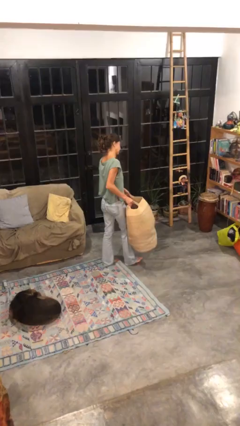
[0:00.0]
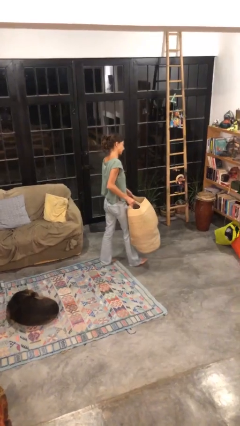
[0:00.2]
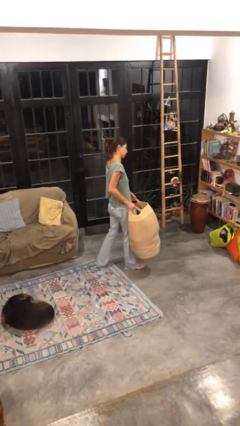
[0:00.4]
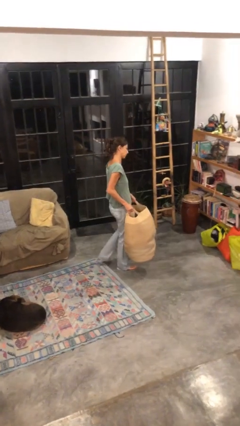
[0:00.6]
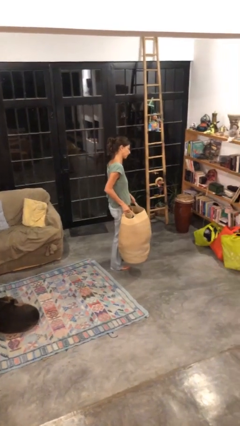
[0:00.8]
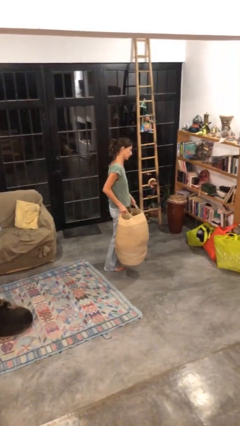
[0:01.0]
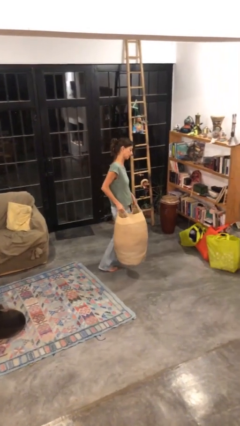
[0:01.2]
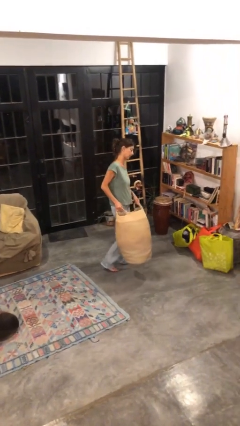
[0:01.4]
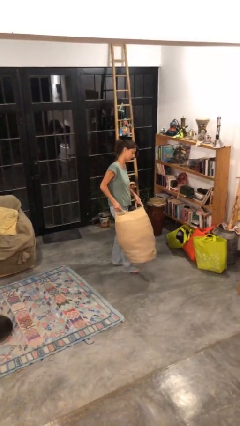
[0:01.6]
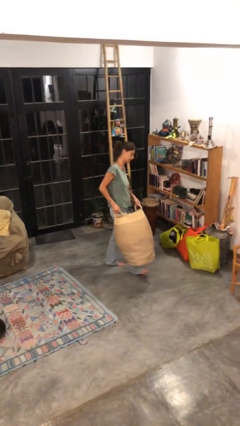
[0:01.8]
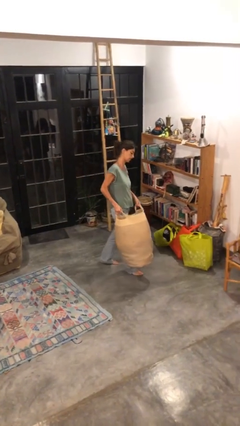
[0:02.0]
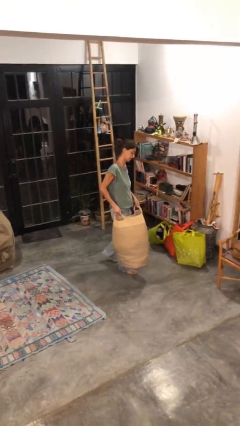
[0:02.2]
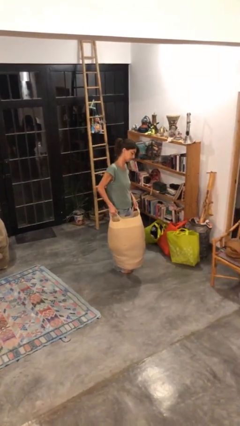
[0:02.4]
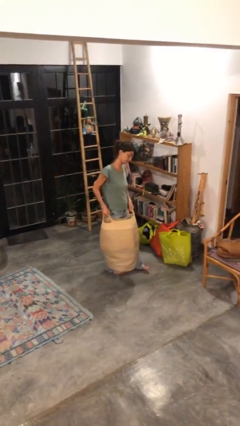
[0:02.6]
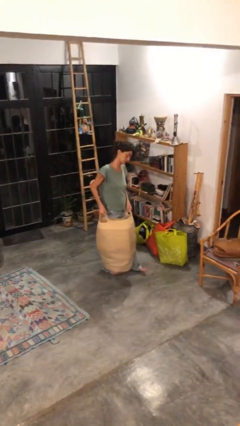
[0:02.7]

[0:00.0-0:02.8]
person carries laundry basket

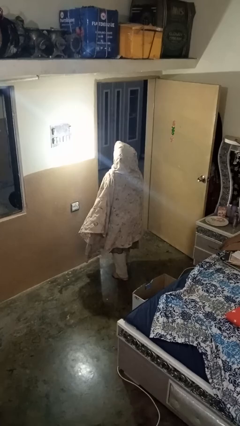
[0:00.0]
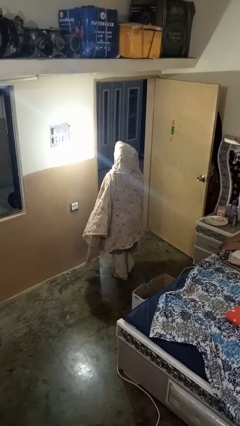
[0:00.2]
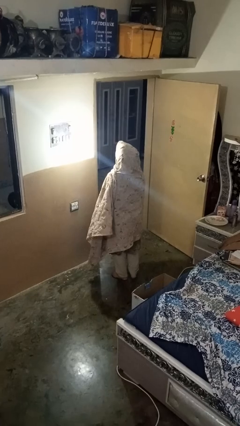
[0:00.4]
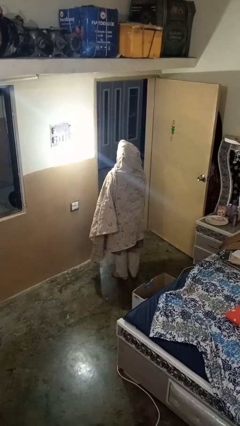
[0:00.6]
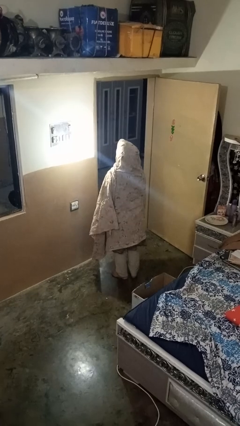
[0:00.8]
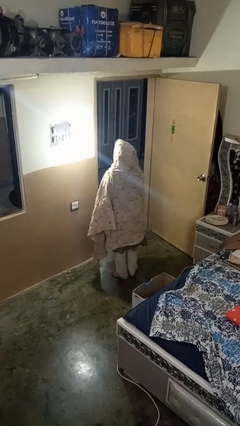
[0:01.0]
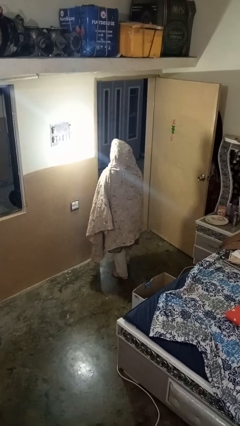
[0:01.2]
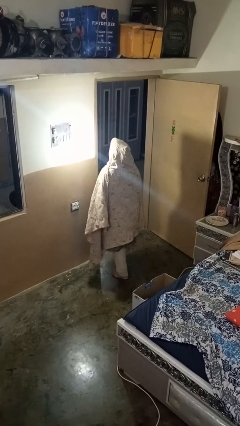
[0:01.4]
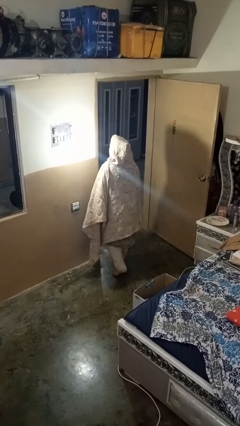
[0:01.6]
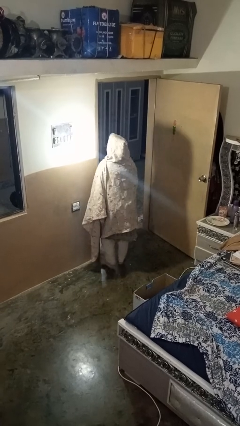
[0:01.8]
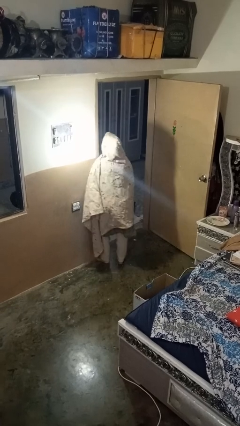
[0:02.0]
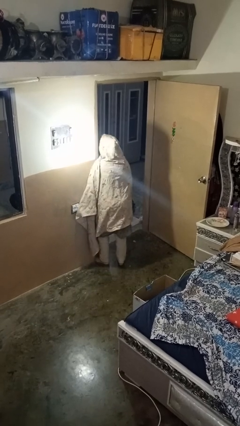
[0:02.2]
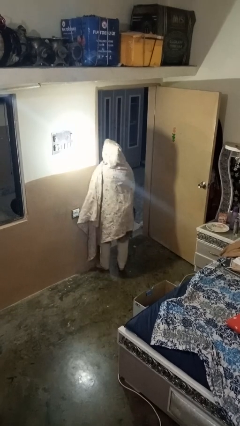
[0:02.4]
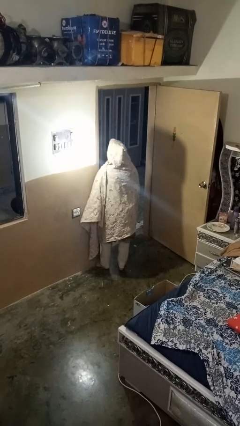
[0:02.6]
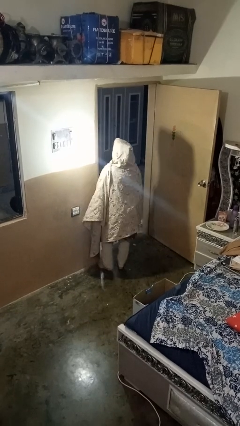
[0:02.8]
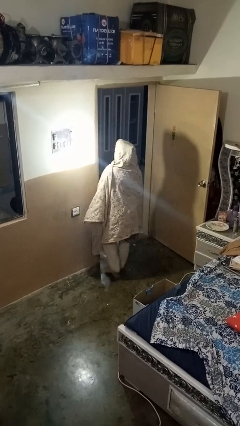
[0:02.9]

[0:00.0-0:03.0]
person bumps into wall

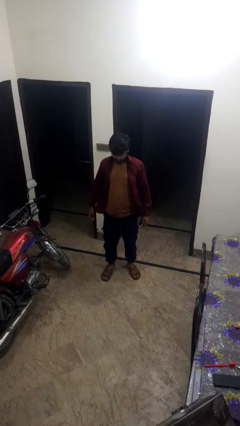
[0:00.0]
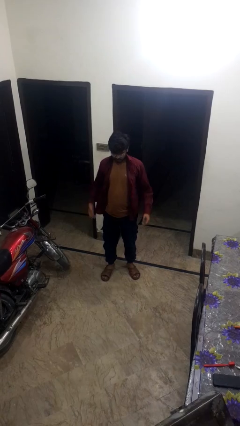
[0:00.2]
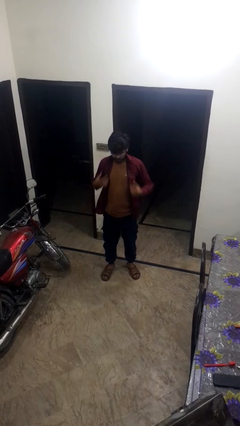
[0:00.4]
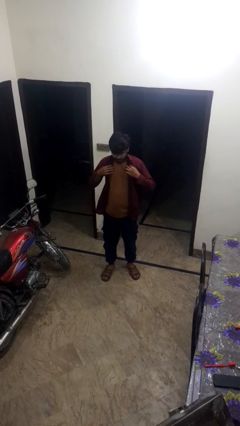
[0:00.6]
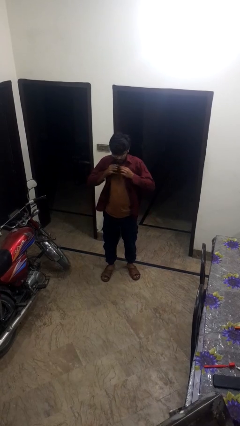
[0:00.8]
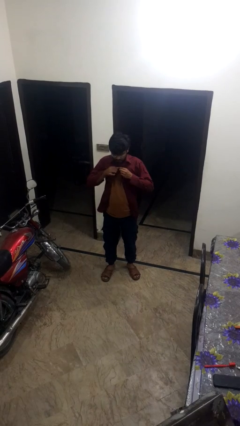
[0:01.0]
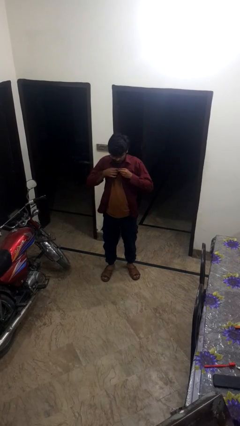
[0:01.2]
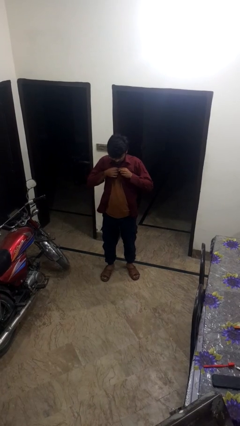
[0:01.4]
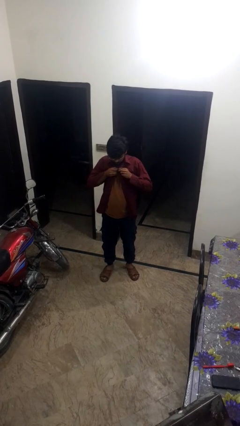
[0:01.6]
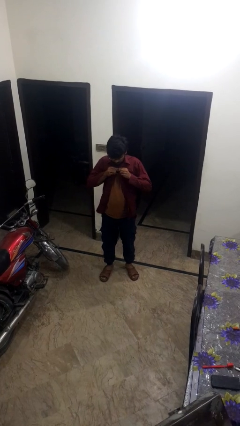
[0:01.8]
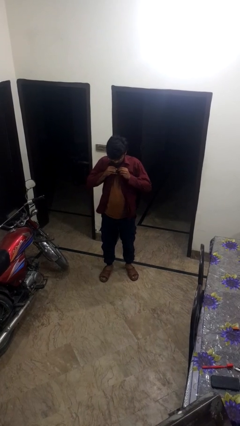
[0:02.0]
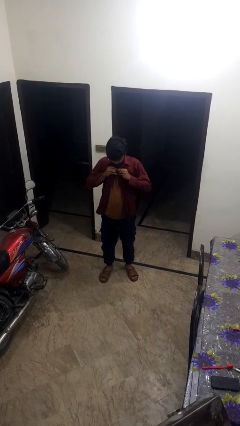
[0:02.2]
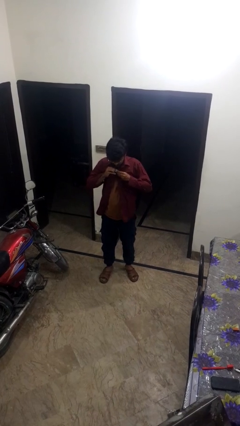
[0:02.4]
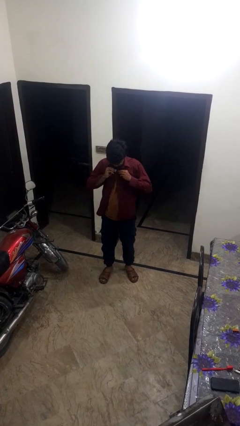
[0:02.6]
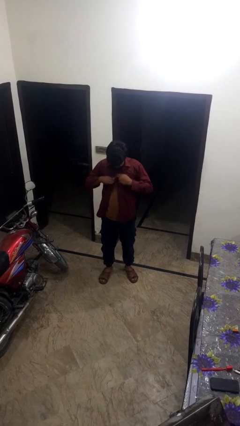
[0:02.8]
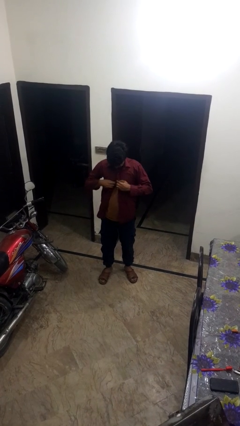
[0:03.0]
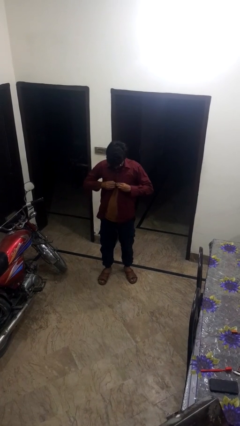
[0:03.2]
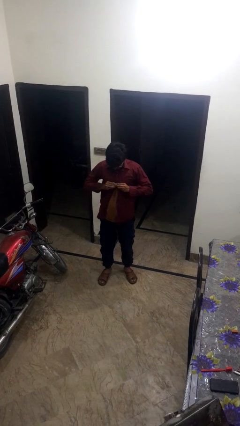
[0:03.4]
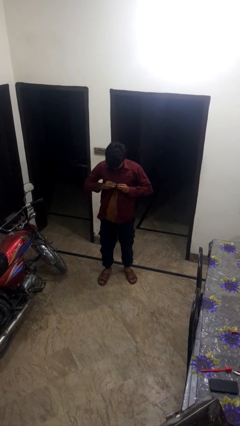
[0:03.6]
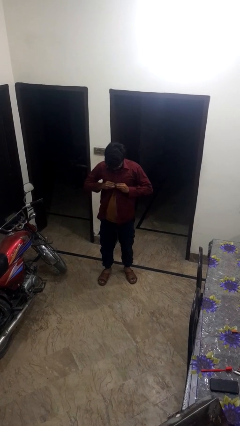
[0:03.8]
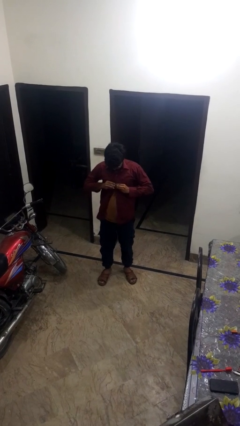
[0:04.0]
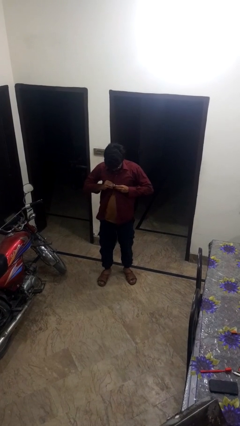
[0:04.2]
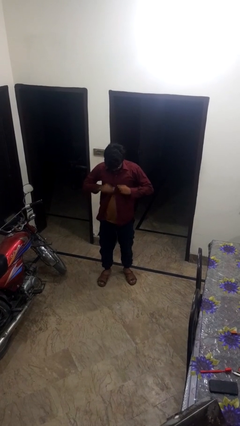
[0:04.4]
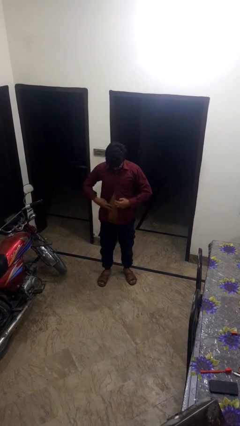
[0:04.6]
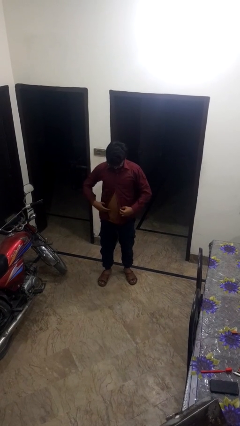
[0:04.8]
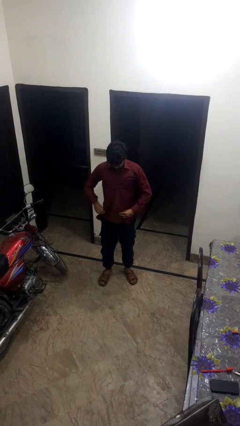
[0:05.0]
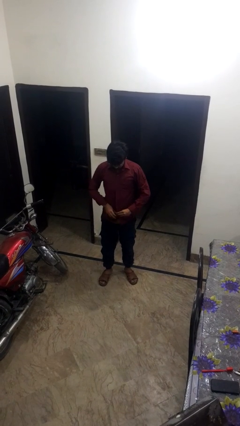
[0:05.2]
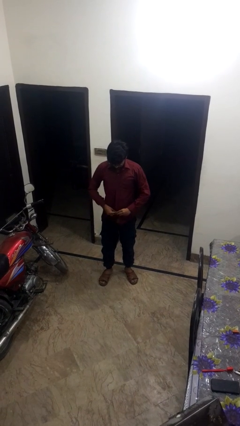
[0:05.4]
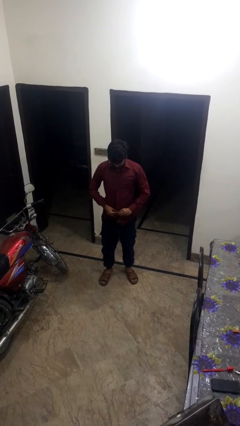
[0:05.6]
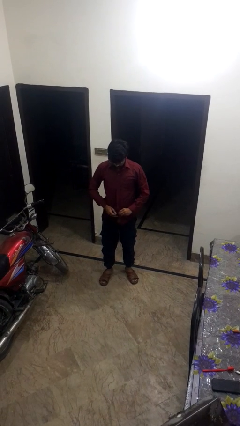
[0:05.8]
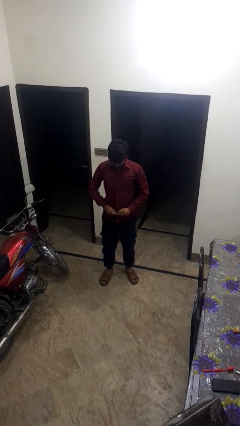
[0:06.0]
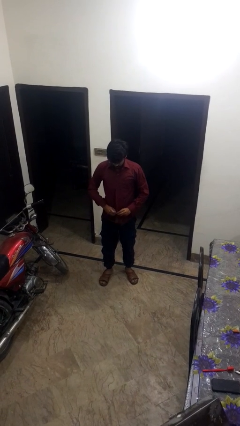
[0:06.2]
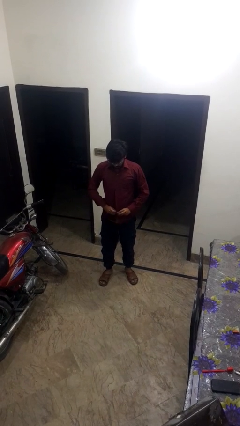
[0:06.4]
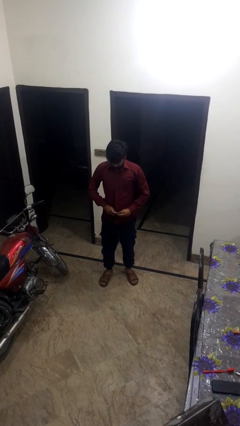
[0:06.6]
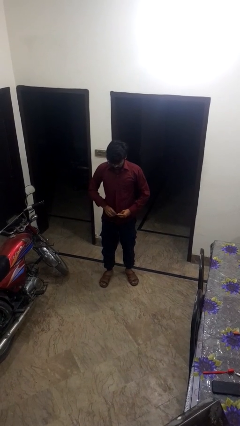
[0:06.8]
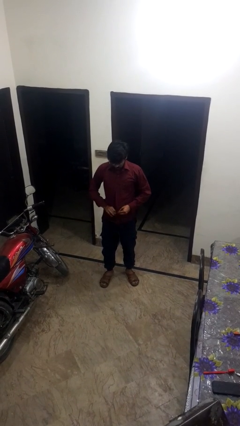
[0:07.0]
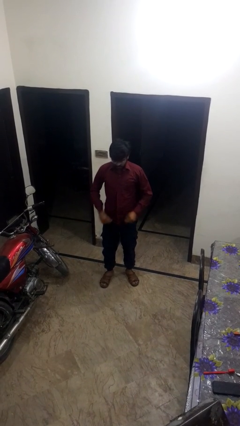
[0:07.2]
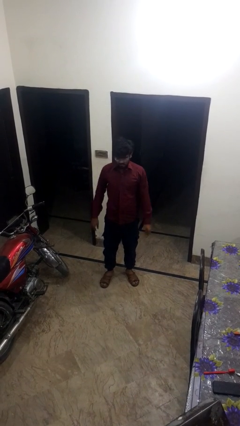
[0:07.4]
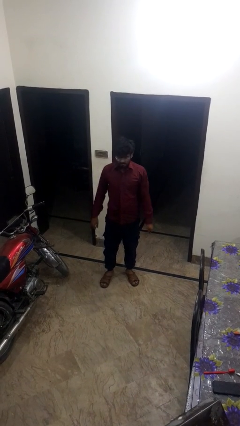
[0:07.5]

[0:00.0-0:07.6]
person buttons shirt

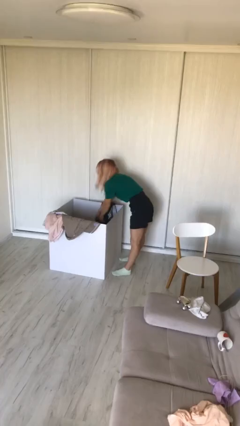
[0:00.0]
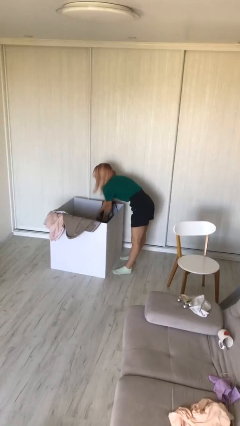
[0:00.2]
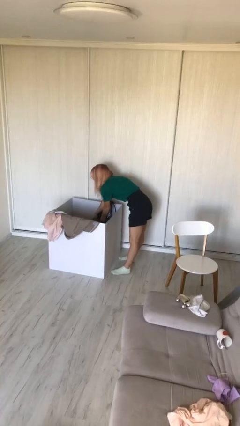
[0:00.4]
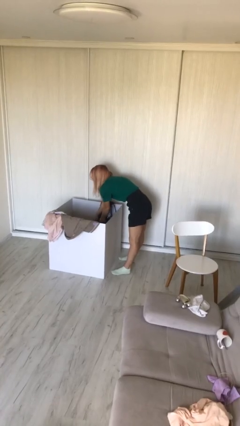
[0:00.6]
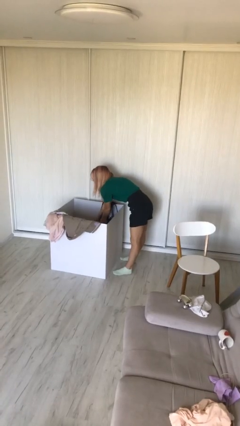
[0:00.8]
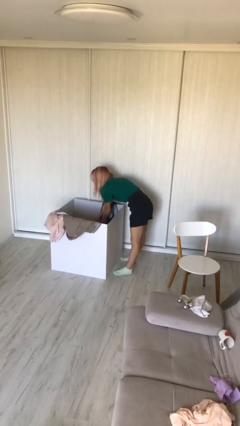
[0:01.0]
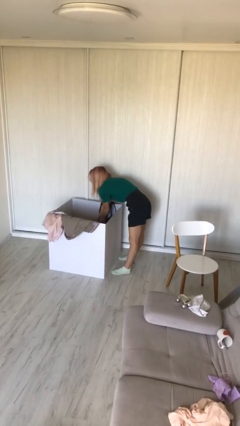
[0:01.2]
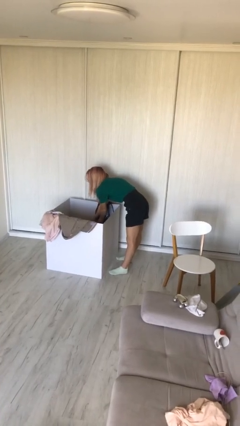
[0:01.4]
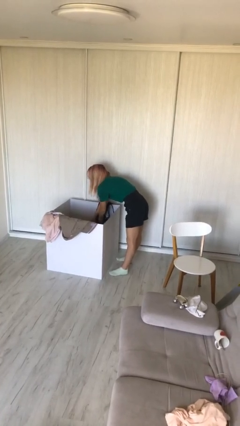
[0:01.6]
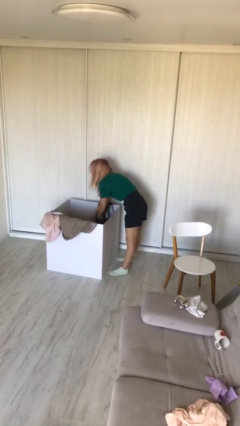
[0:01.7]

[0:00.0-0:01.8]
person searches in box

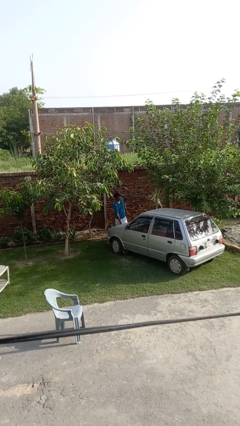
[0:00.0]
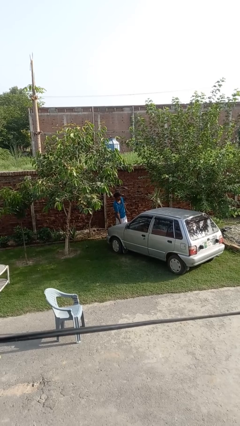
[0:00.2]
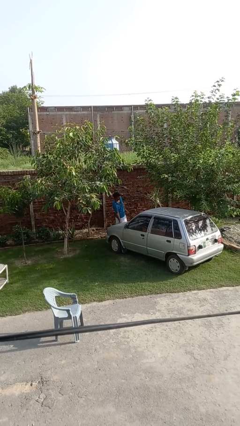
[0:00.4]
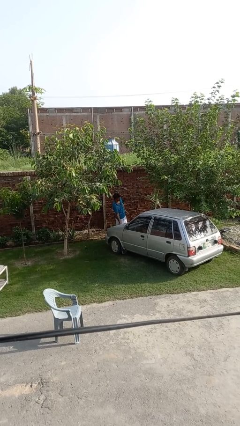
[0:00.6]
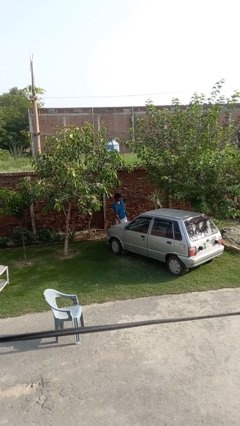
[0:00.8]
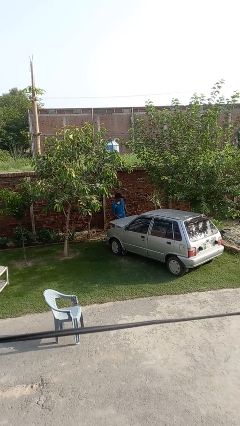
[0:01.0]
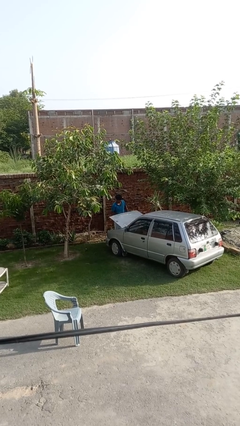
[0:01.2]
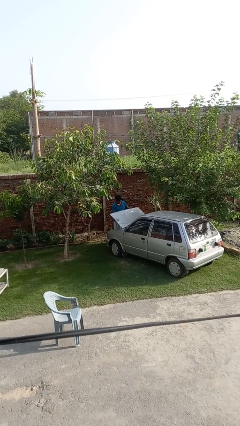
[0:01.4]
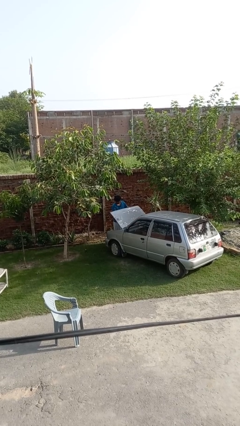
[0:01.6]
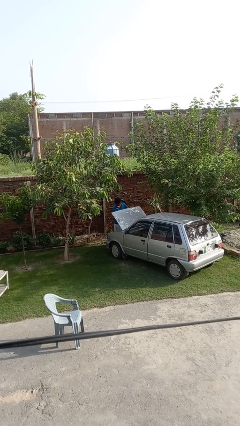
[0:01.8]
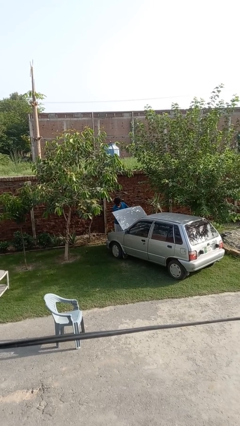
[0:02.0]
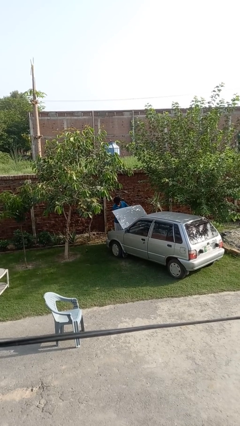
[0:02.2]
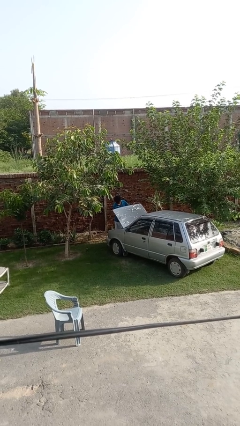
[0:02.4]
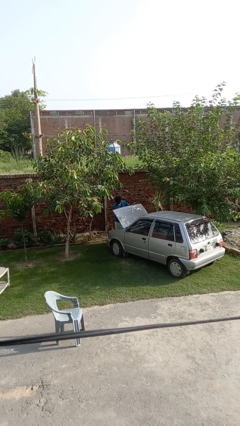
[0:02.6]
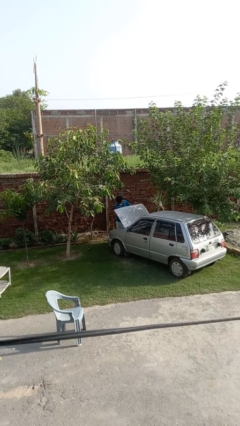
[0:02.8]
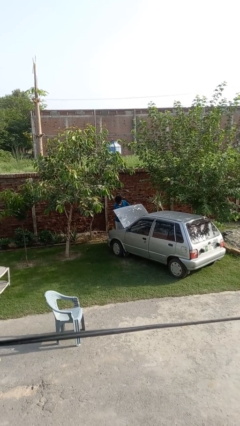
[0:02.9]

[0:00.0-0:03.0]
person opens car hood
